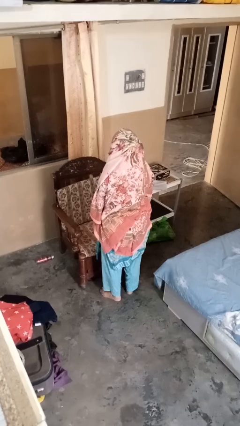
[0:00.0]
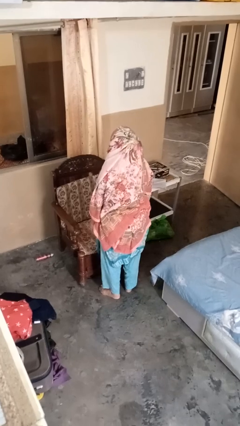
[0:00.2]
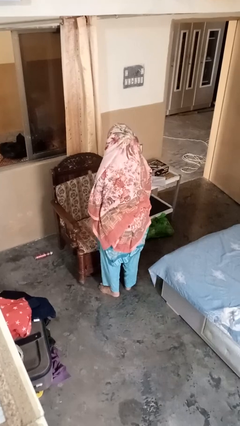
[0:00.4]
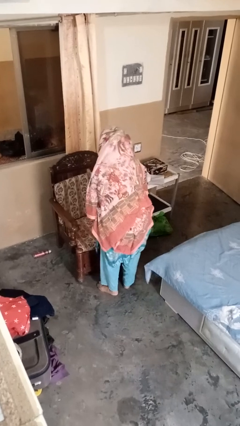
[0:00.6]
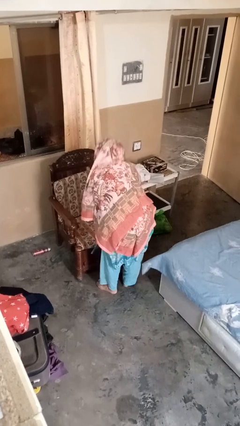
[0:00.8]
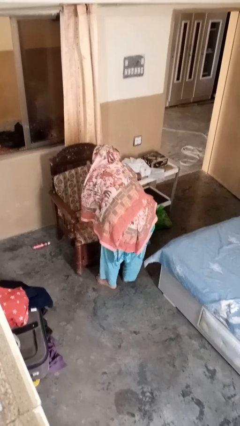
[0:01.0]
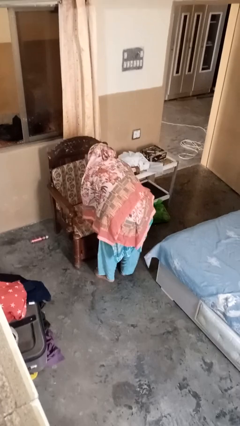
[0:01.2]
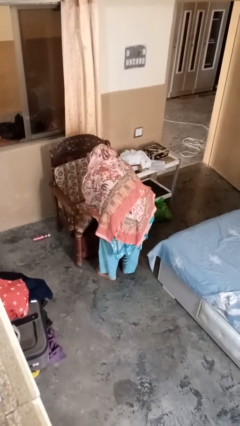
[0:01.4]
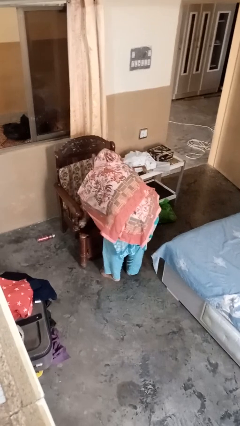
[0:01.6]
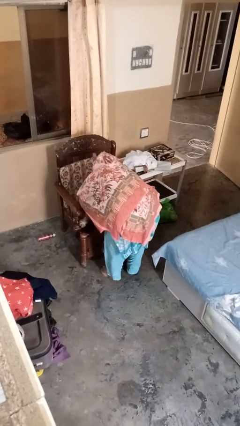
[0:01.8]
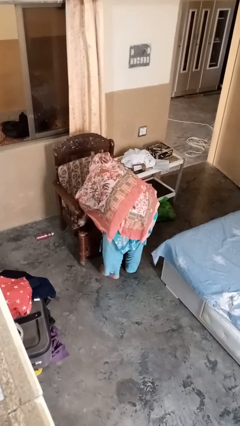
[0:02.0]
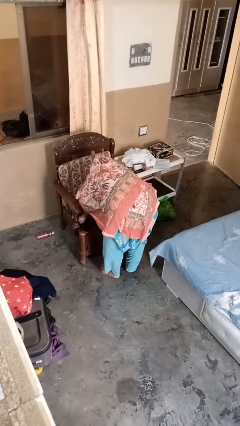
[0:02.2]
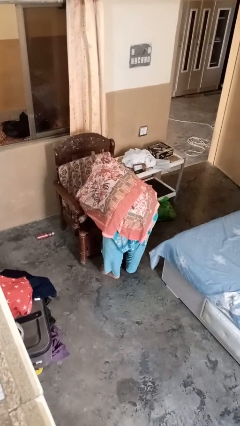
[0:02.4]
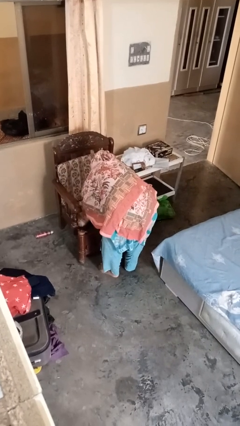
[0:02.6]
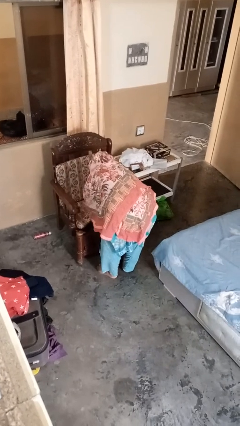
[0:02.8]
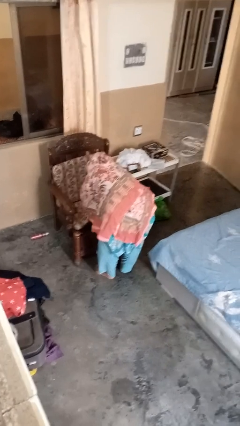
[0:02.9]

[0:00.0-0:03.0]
person searches under couch

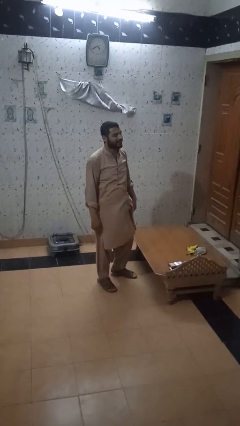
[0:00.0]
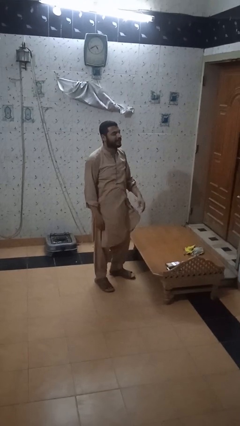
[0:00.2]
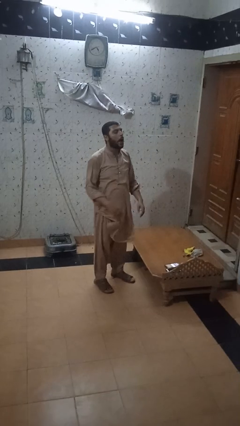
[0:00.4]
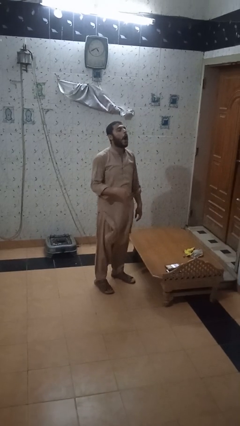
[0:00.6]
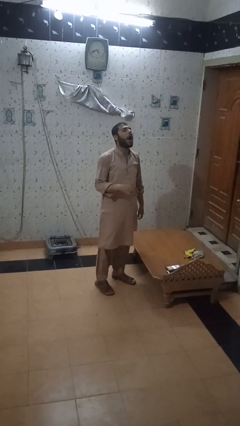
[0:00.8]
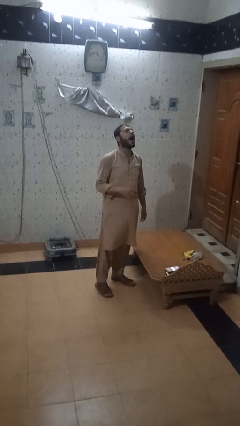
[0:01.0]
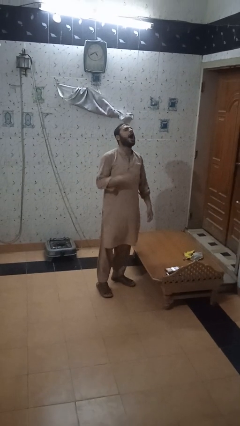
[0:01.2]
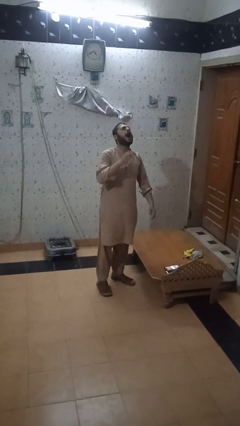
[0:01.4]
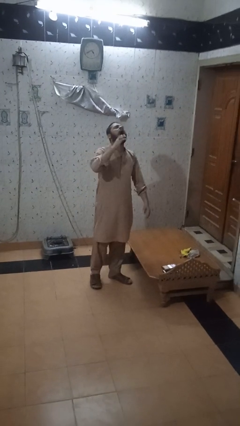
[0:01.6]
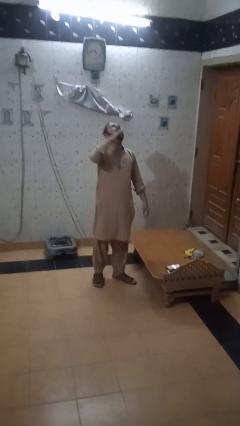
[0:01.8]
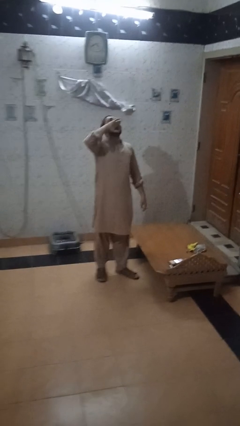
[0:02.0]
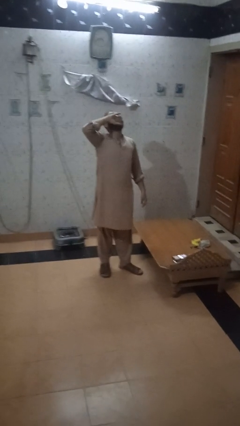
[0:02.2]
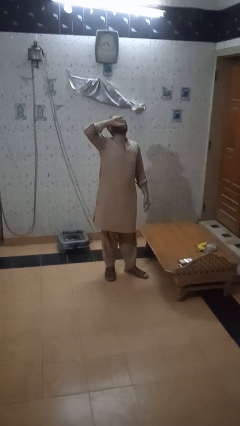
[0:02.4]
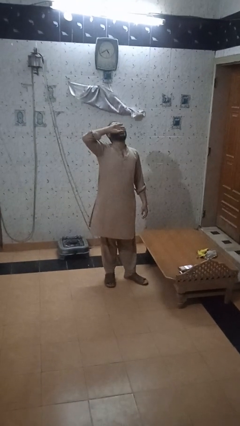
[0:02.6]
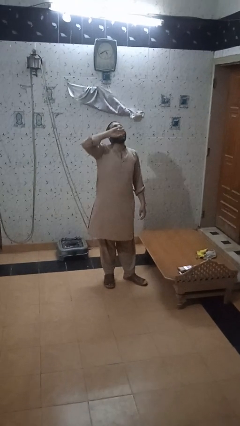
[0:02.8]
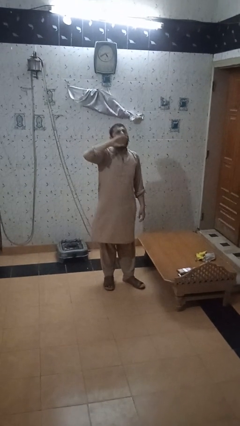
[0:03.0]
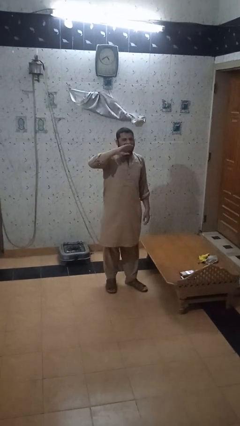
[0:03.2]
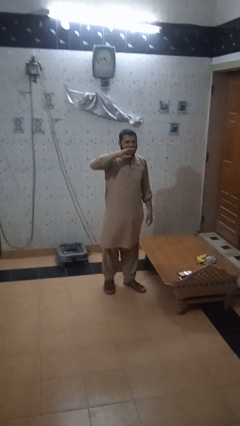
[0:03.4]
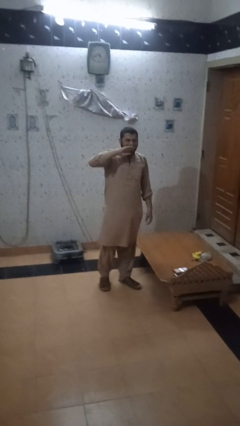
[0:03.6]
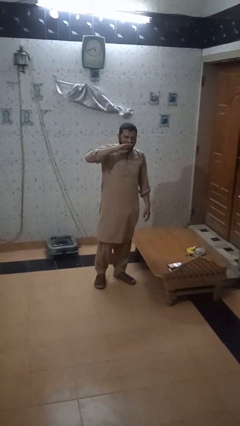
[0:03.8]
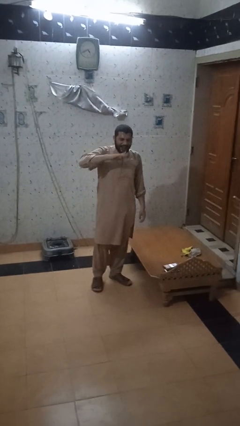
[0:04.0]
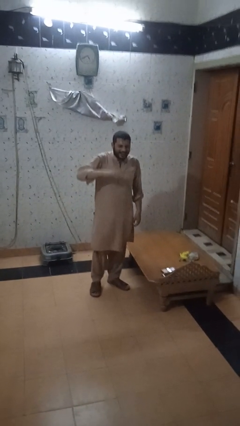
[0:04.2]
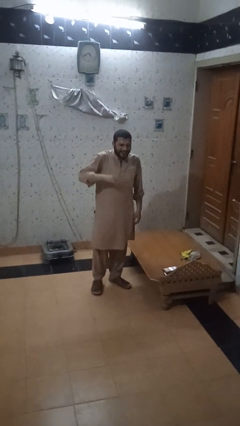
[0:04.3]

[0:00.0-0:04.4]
person yawns

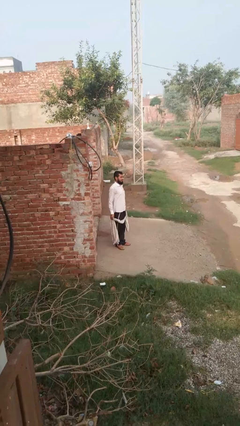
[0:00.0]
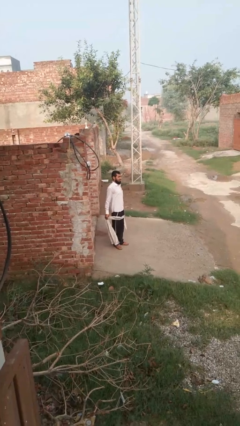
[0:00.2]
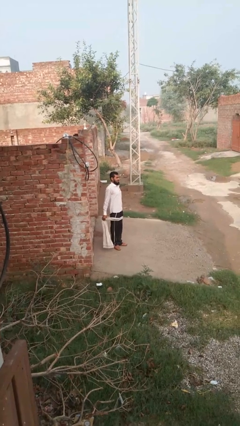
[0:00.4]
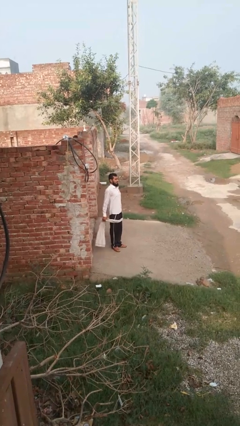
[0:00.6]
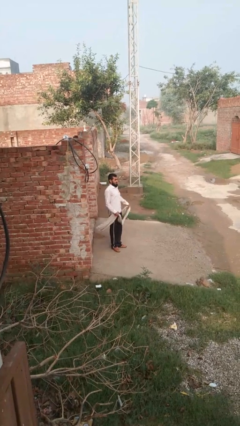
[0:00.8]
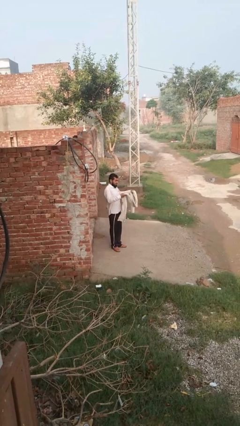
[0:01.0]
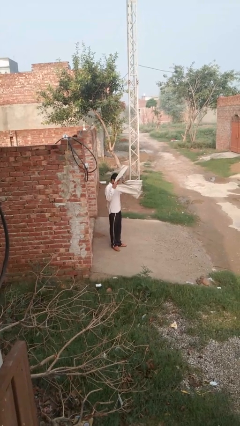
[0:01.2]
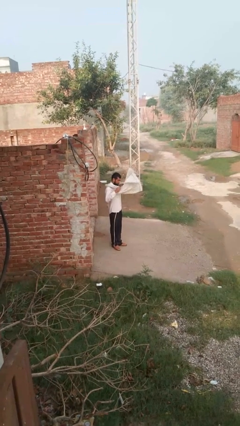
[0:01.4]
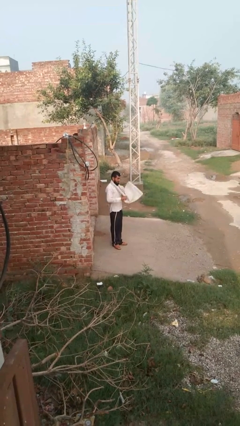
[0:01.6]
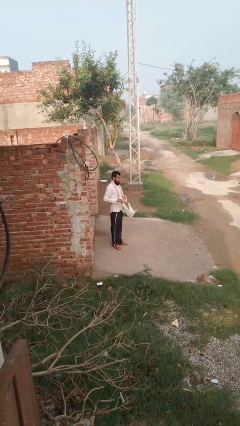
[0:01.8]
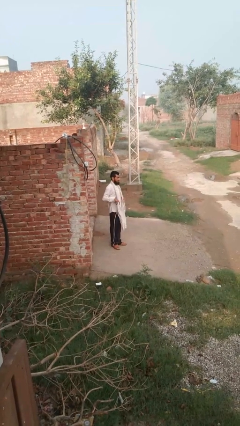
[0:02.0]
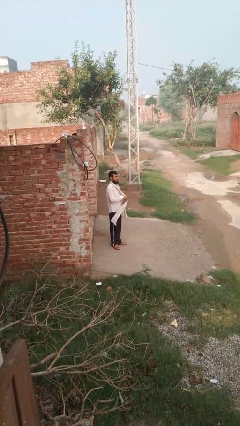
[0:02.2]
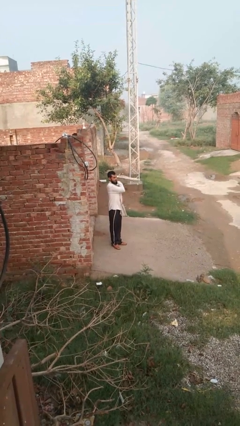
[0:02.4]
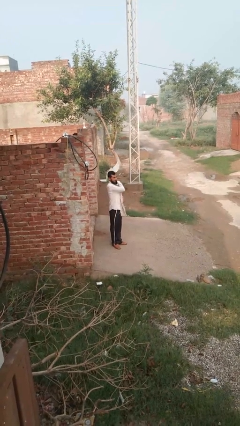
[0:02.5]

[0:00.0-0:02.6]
person puts on scarf

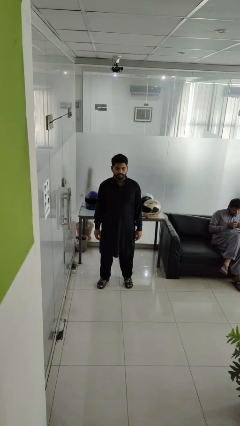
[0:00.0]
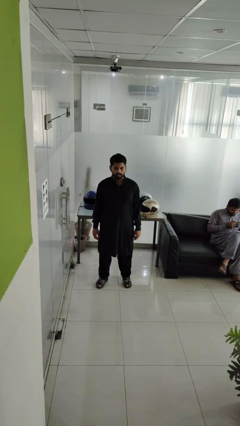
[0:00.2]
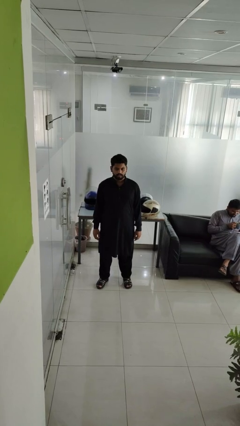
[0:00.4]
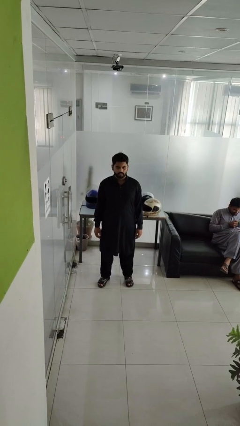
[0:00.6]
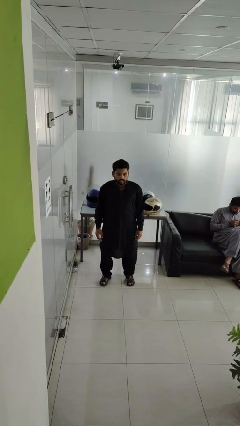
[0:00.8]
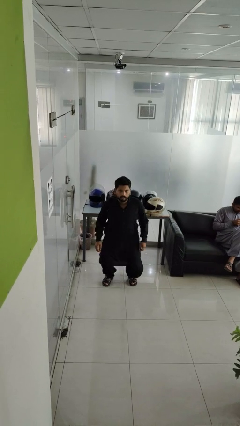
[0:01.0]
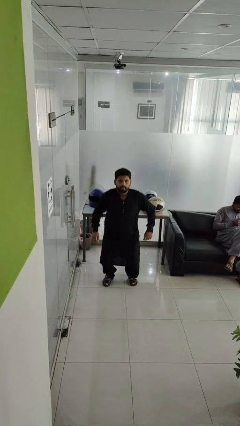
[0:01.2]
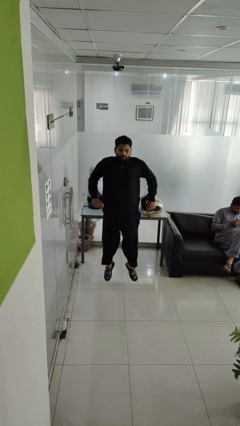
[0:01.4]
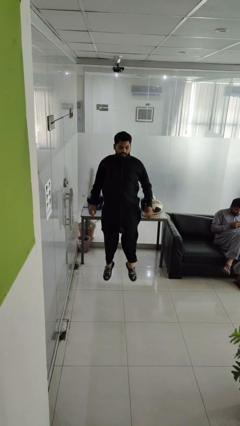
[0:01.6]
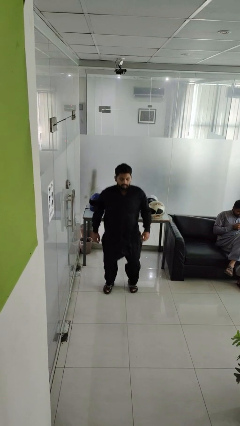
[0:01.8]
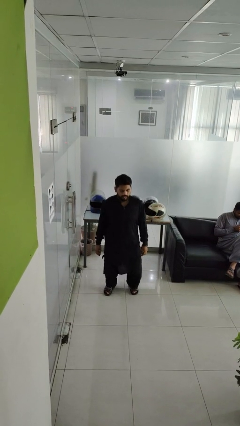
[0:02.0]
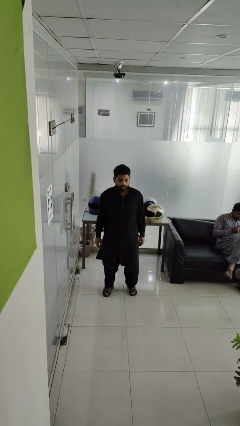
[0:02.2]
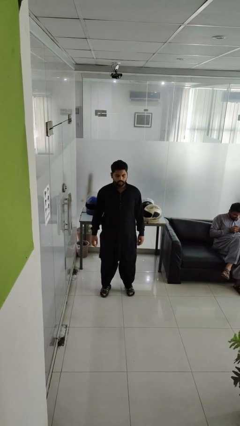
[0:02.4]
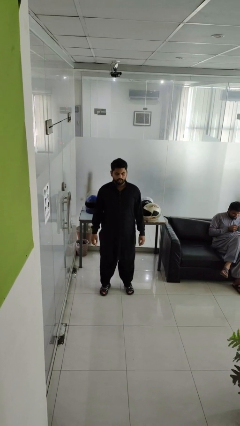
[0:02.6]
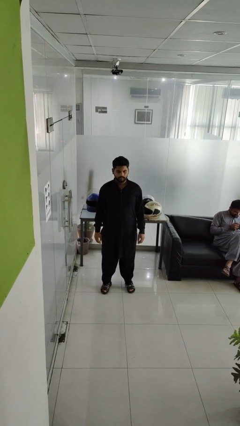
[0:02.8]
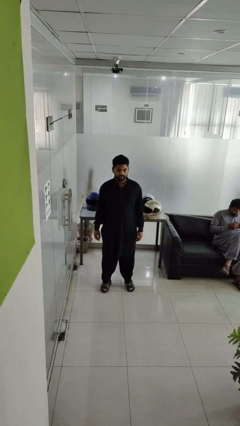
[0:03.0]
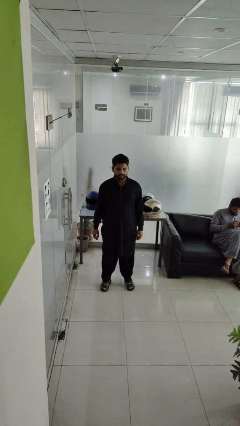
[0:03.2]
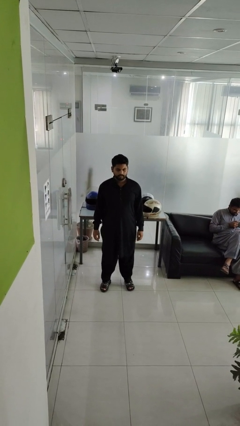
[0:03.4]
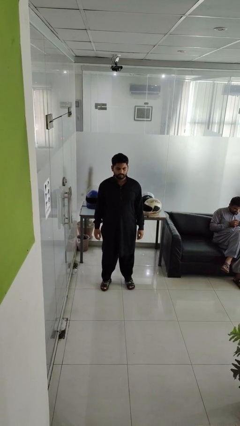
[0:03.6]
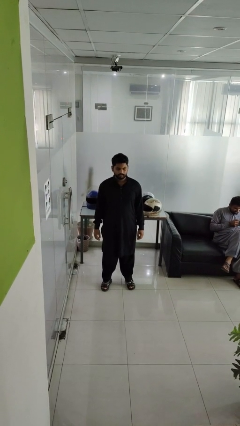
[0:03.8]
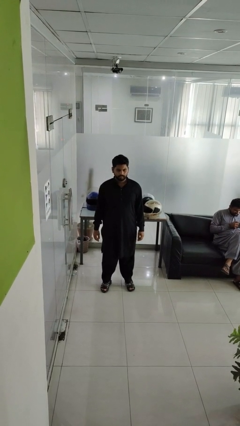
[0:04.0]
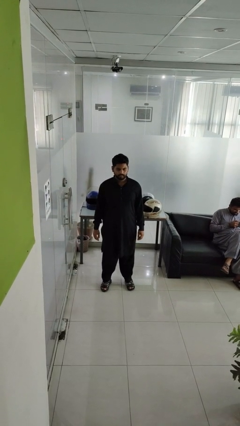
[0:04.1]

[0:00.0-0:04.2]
person jumps

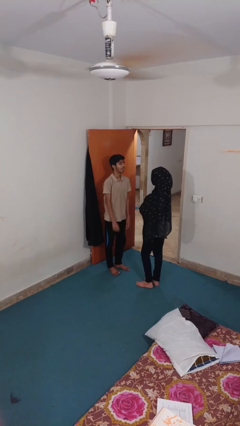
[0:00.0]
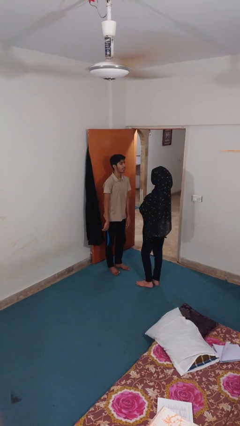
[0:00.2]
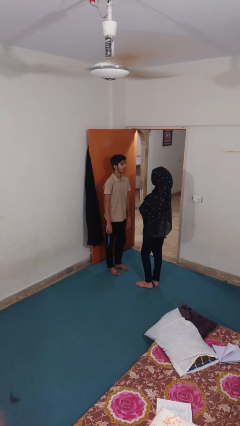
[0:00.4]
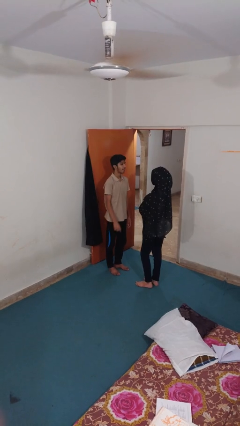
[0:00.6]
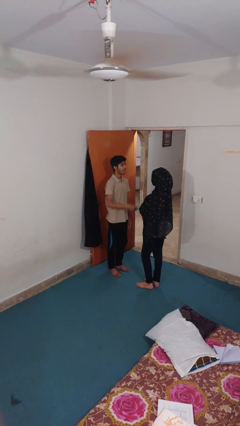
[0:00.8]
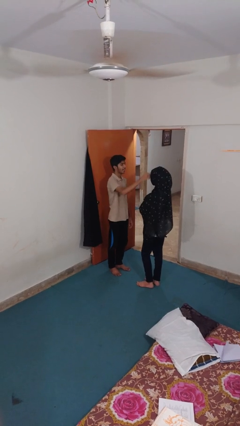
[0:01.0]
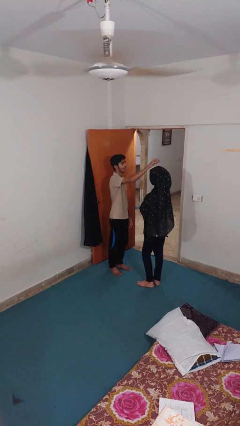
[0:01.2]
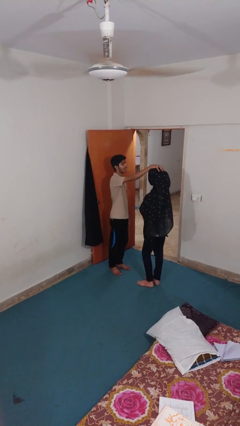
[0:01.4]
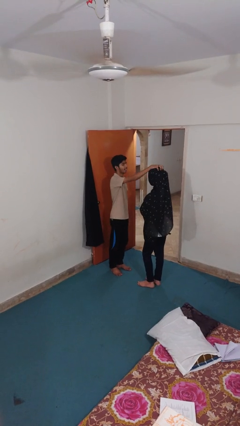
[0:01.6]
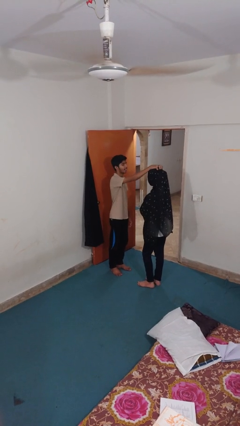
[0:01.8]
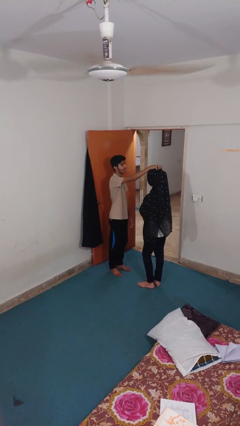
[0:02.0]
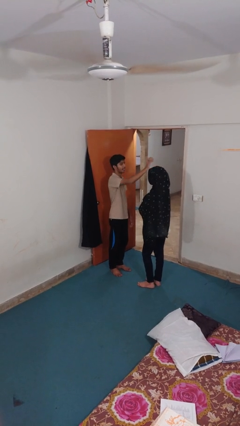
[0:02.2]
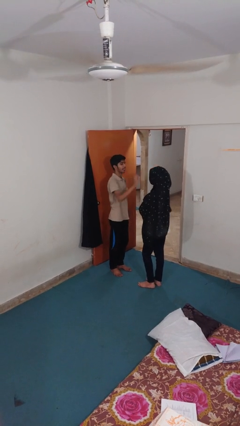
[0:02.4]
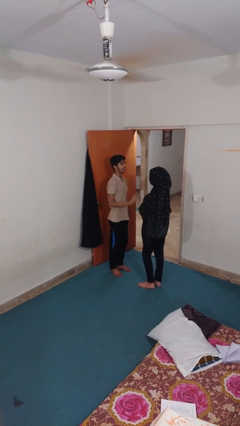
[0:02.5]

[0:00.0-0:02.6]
person grabs person by hair

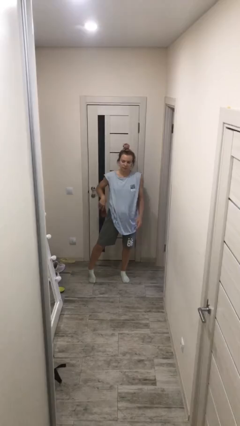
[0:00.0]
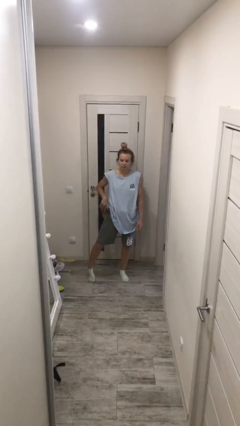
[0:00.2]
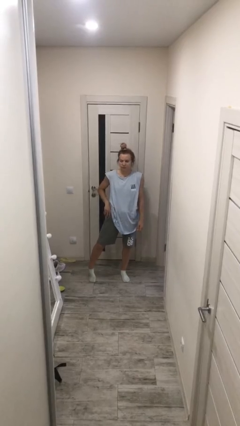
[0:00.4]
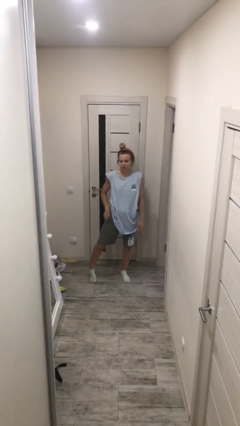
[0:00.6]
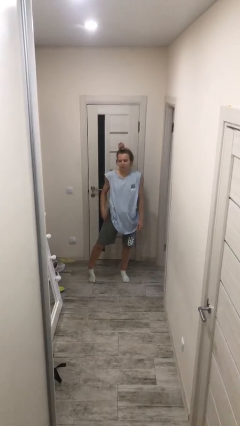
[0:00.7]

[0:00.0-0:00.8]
person puts phone into pocket
